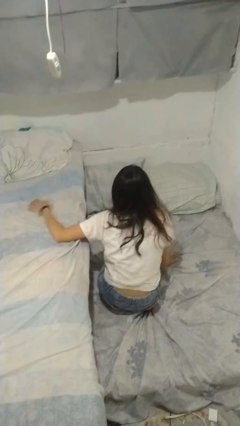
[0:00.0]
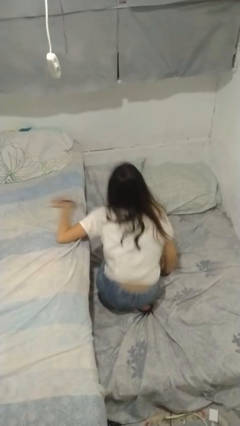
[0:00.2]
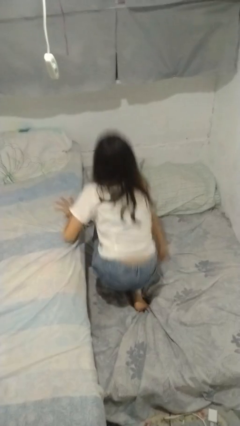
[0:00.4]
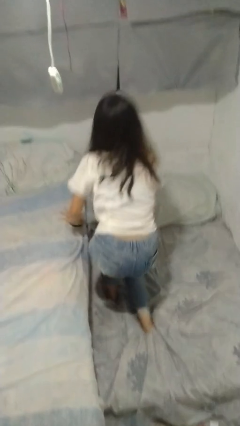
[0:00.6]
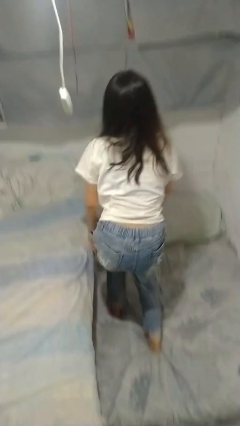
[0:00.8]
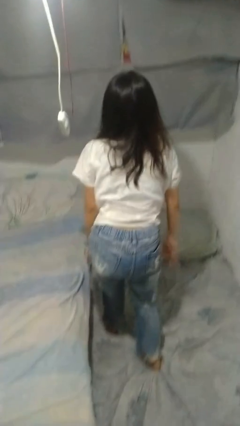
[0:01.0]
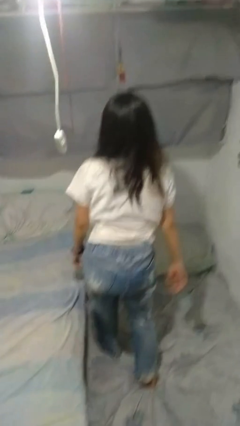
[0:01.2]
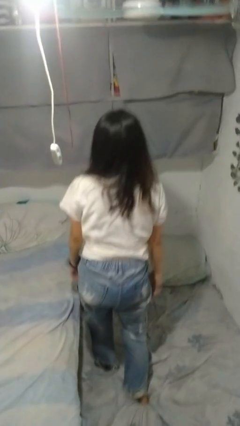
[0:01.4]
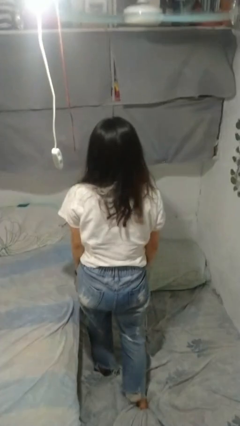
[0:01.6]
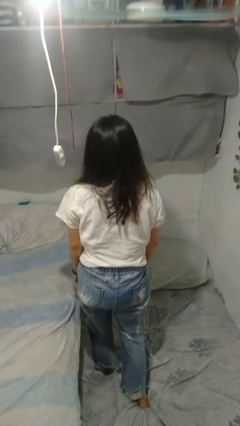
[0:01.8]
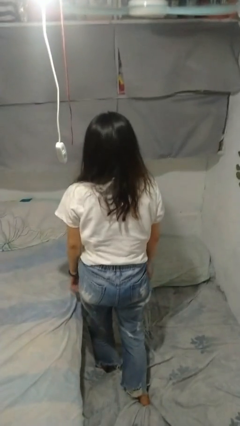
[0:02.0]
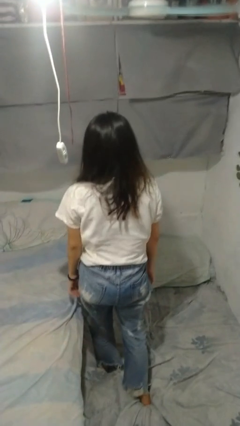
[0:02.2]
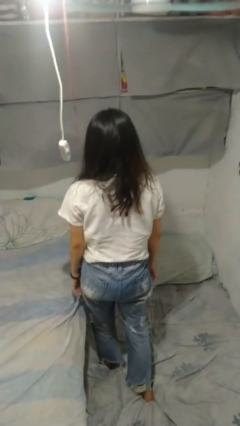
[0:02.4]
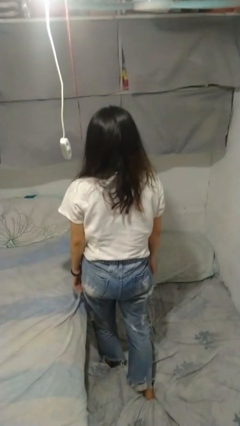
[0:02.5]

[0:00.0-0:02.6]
person stands up from floor

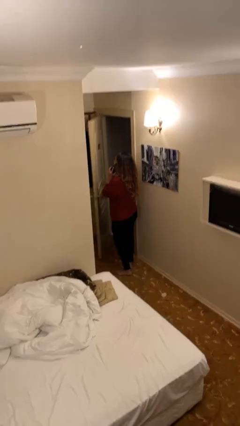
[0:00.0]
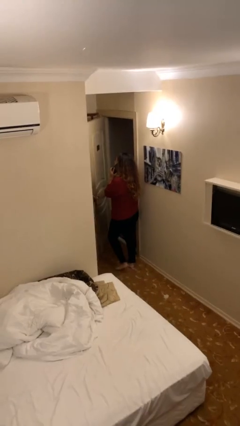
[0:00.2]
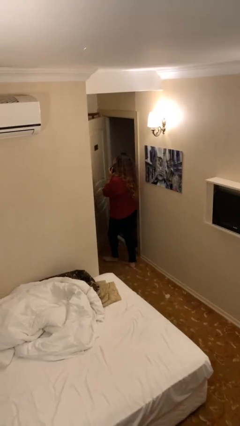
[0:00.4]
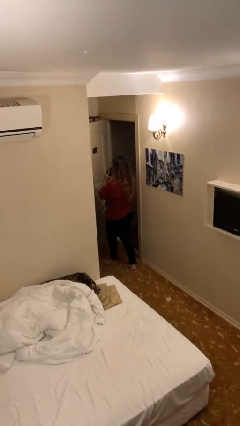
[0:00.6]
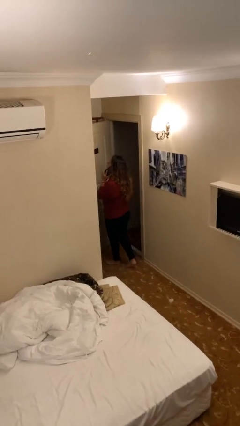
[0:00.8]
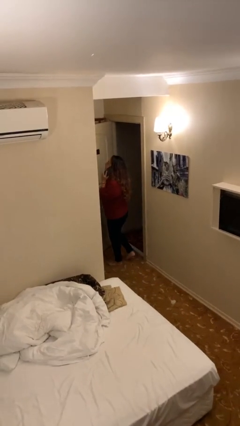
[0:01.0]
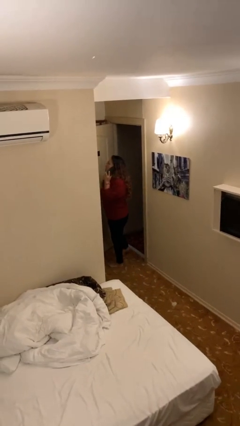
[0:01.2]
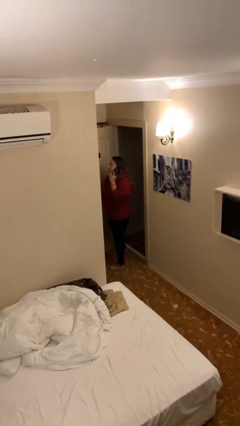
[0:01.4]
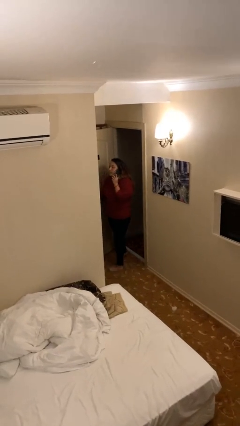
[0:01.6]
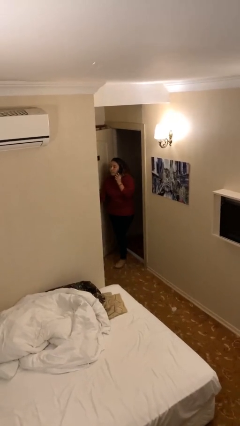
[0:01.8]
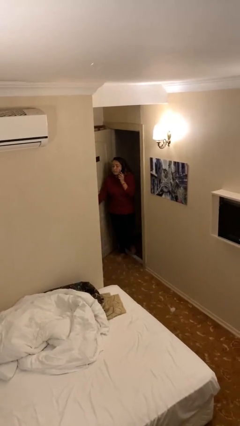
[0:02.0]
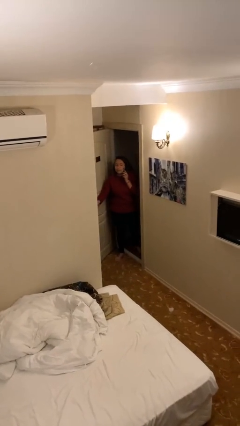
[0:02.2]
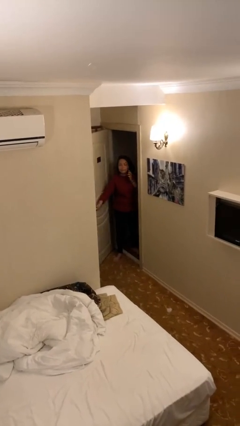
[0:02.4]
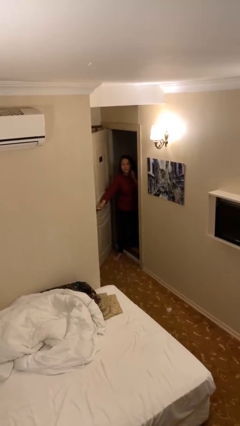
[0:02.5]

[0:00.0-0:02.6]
person exits scene through structure

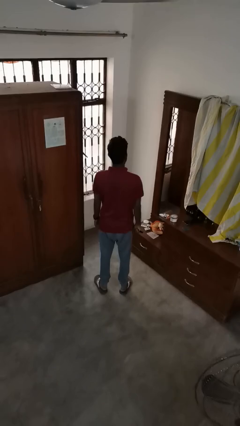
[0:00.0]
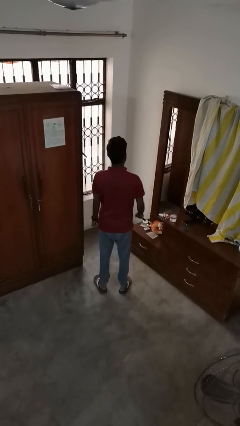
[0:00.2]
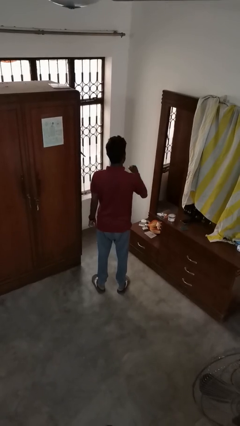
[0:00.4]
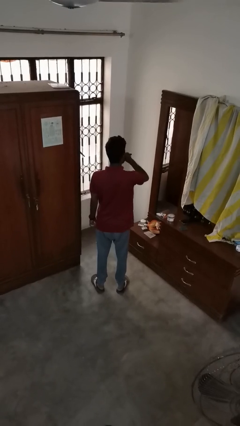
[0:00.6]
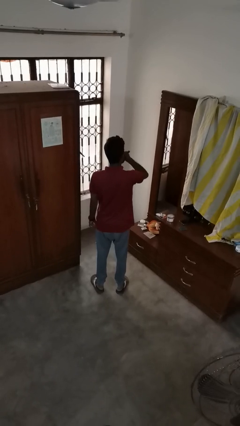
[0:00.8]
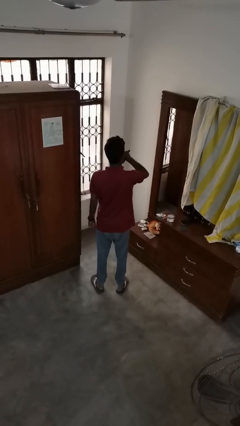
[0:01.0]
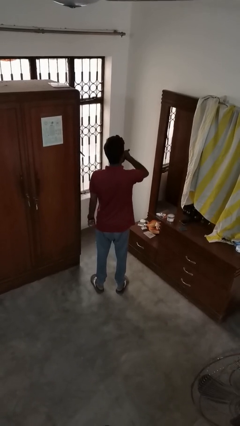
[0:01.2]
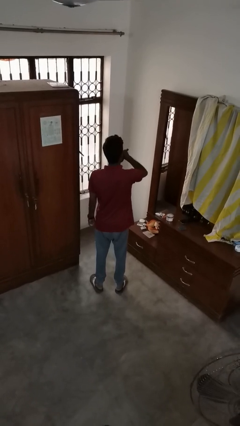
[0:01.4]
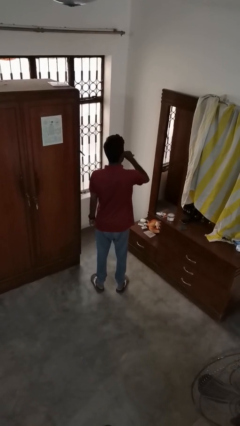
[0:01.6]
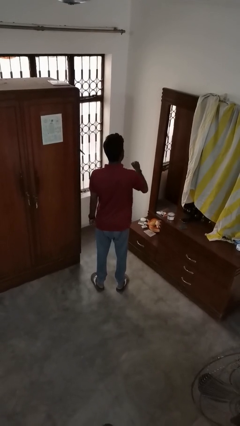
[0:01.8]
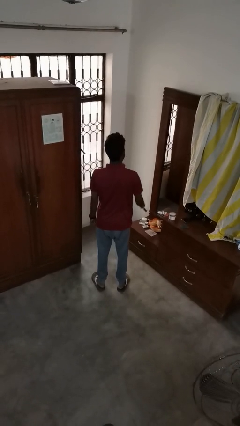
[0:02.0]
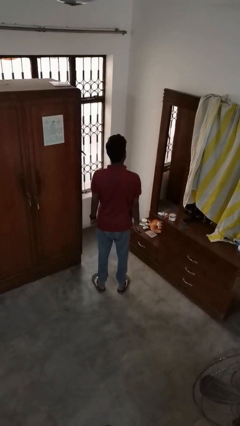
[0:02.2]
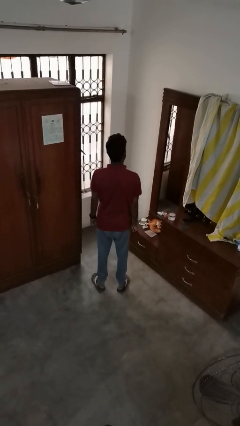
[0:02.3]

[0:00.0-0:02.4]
person vapes

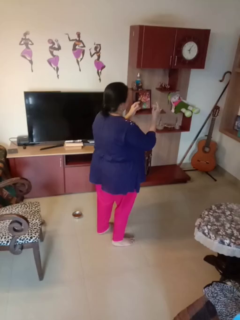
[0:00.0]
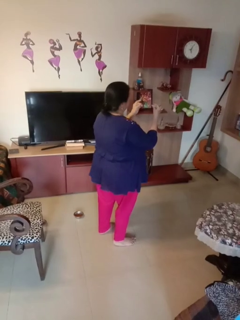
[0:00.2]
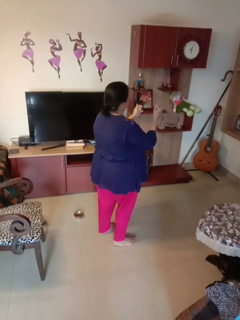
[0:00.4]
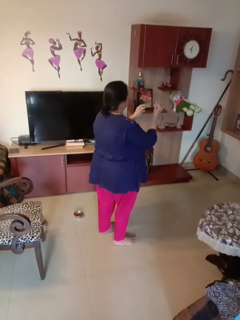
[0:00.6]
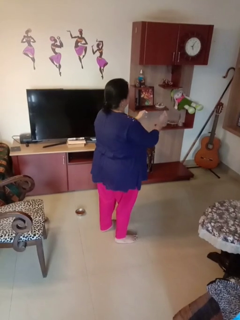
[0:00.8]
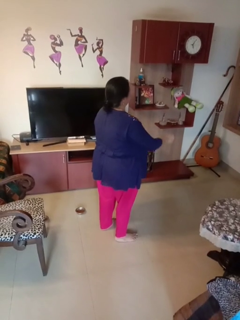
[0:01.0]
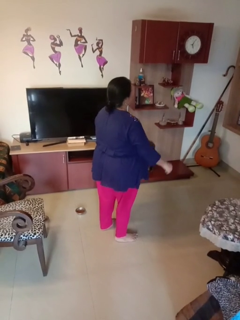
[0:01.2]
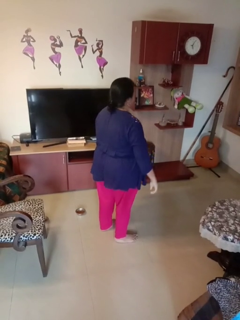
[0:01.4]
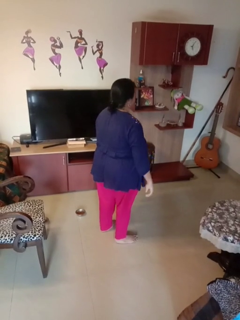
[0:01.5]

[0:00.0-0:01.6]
person snaps fingers

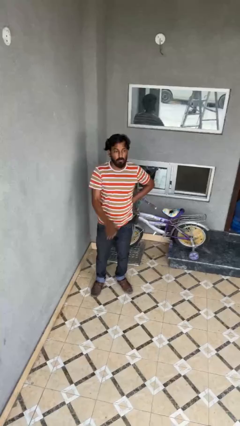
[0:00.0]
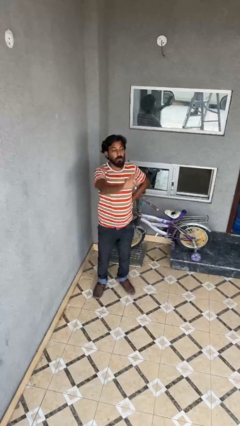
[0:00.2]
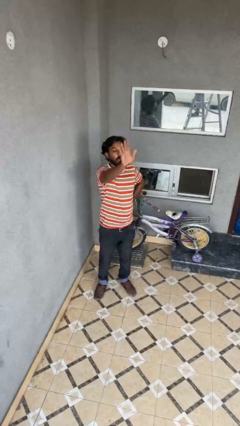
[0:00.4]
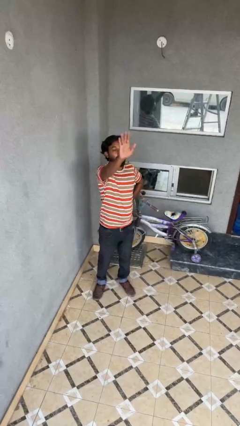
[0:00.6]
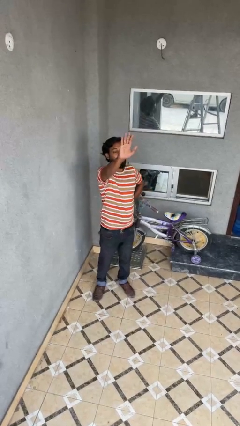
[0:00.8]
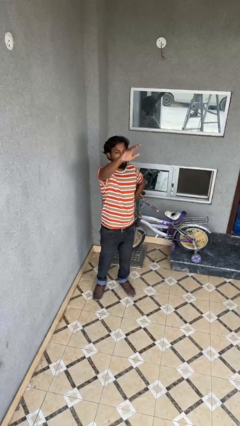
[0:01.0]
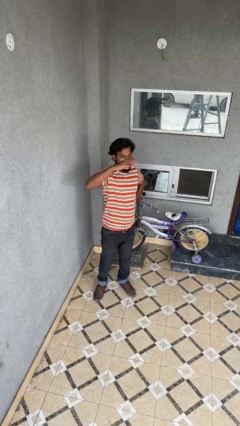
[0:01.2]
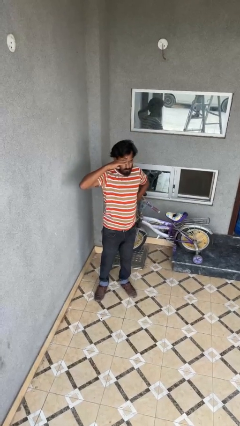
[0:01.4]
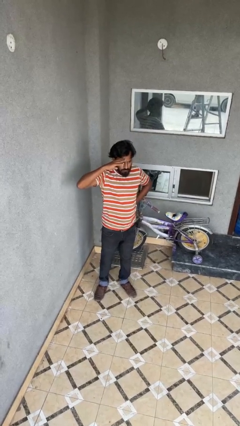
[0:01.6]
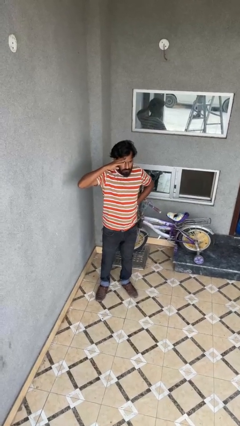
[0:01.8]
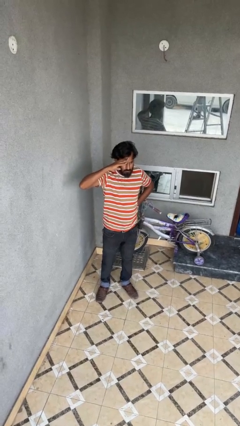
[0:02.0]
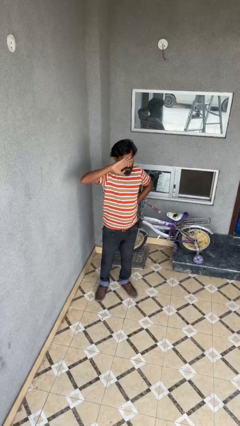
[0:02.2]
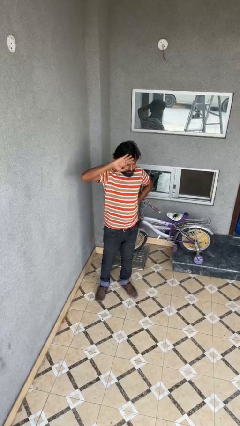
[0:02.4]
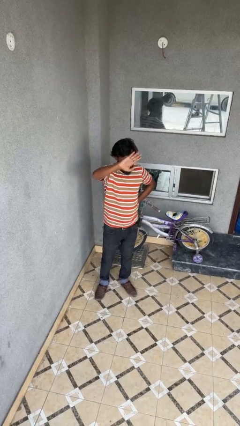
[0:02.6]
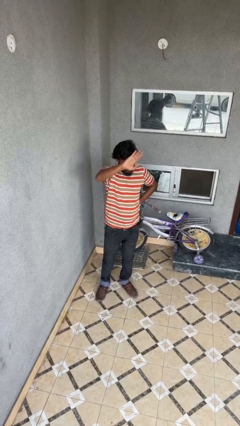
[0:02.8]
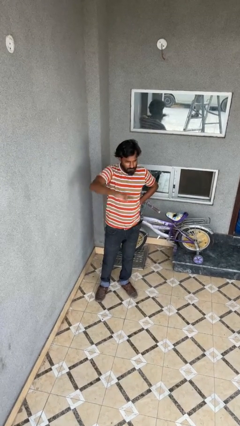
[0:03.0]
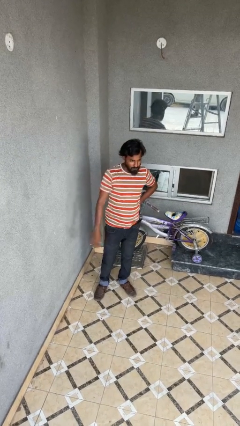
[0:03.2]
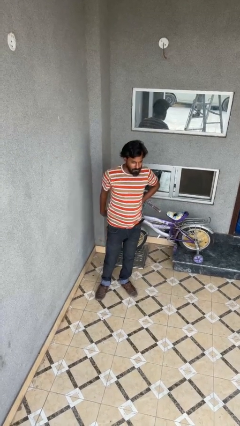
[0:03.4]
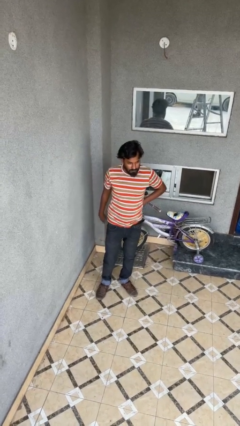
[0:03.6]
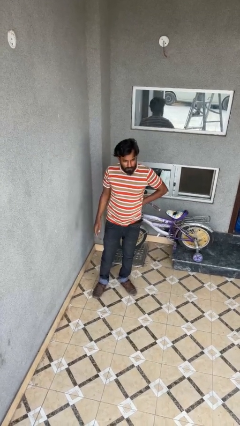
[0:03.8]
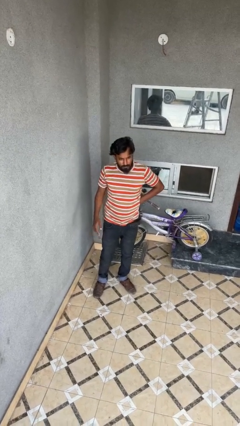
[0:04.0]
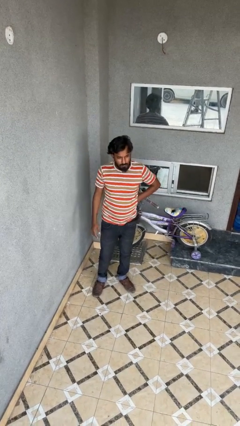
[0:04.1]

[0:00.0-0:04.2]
person waves at person

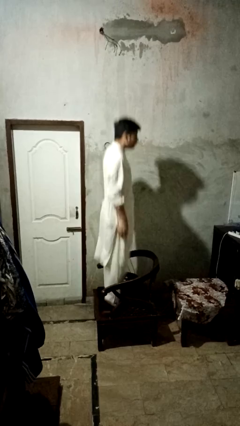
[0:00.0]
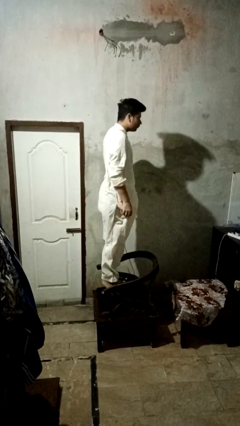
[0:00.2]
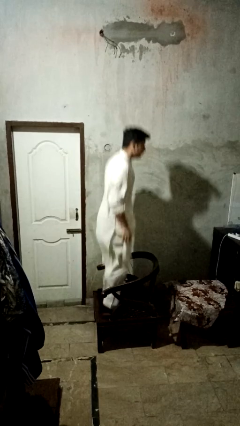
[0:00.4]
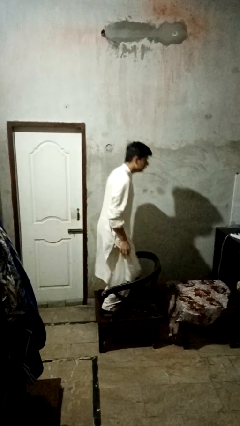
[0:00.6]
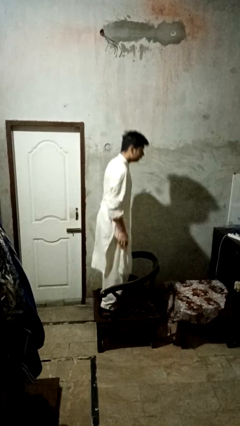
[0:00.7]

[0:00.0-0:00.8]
person jumps on couch

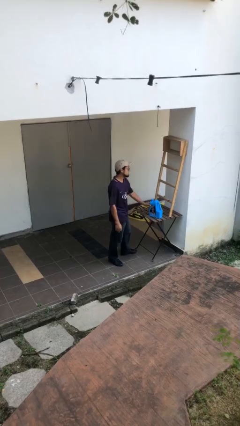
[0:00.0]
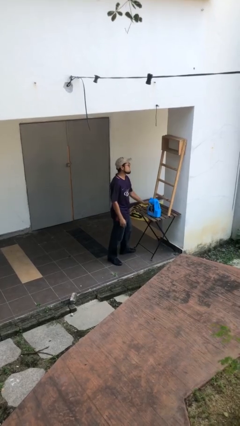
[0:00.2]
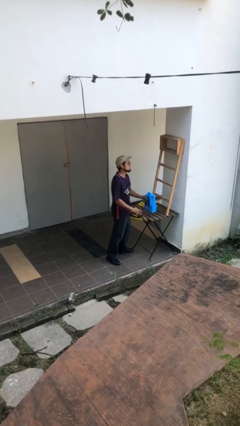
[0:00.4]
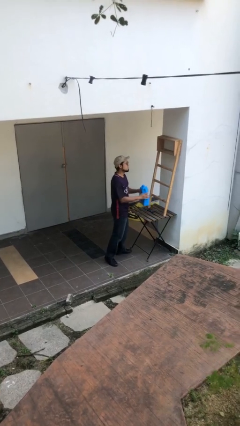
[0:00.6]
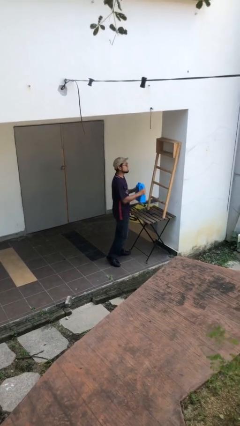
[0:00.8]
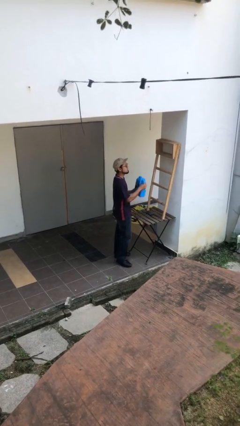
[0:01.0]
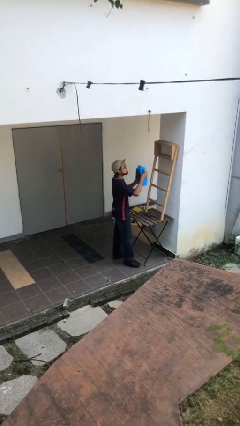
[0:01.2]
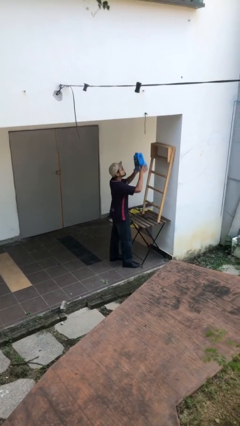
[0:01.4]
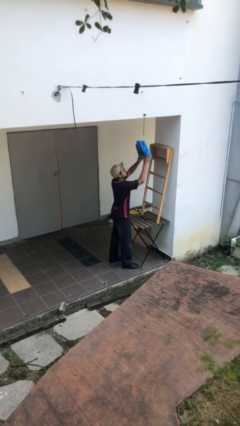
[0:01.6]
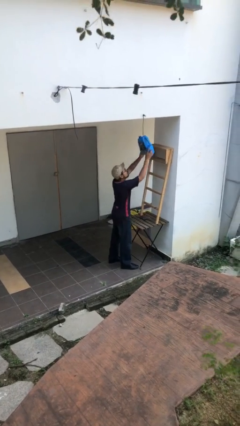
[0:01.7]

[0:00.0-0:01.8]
person picks up object from table

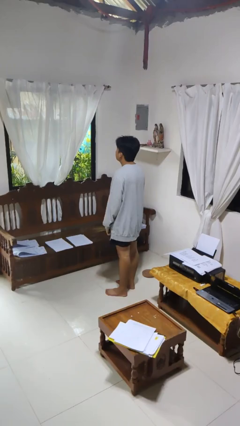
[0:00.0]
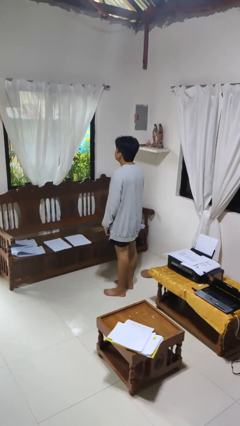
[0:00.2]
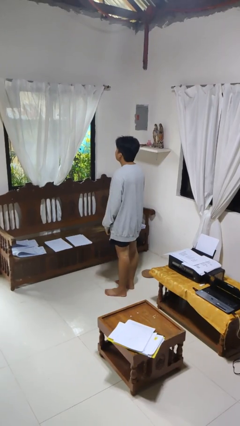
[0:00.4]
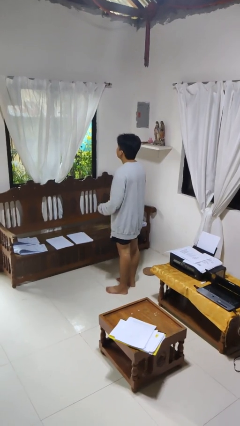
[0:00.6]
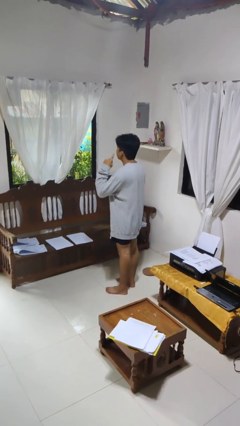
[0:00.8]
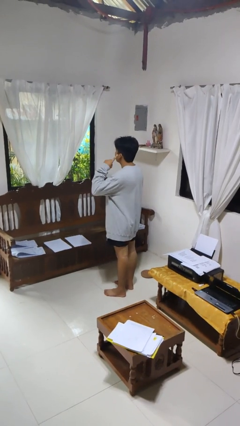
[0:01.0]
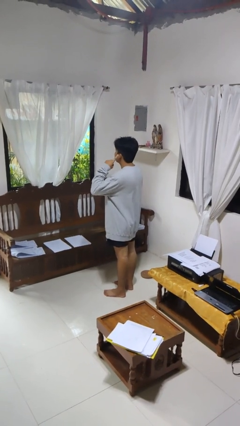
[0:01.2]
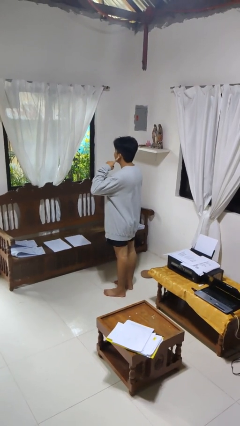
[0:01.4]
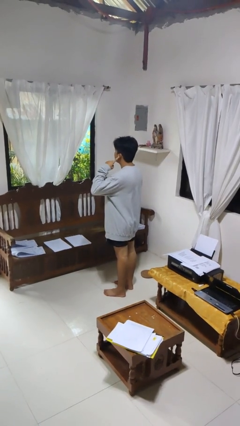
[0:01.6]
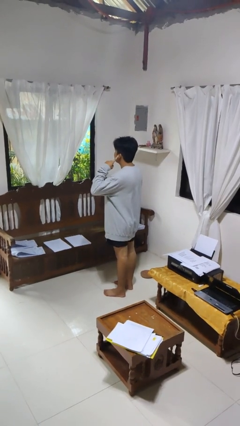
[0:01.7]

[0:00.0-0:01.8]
person gestures listen closely
